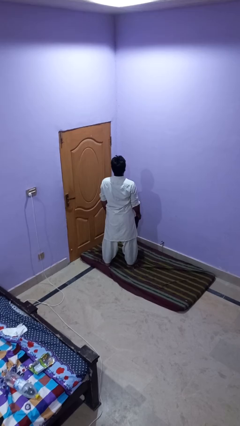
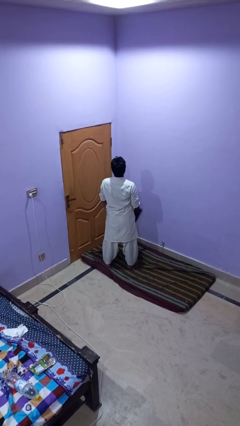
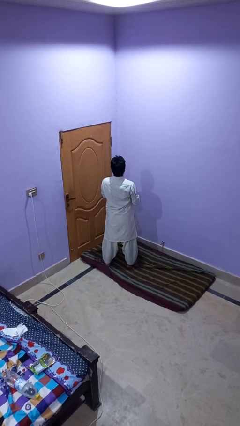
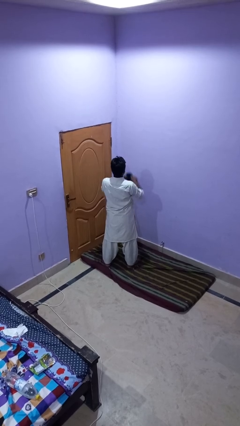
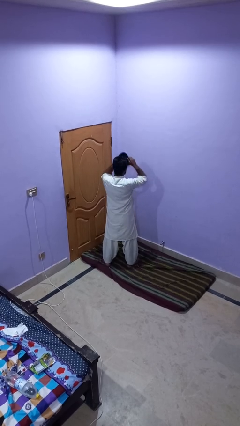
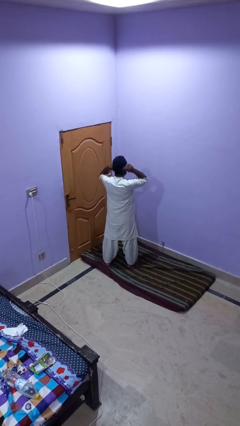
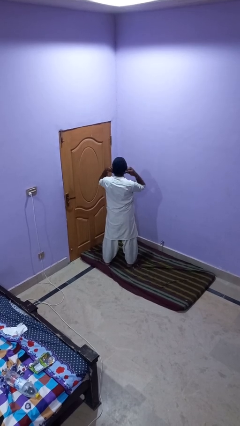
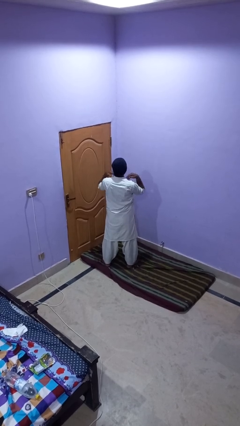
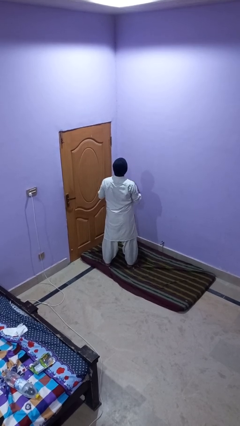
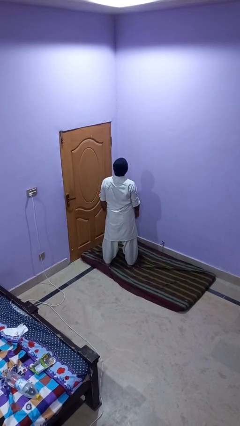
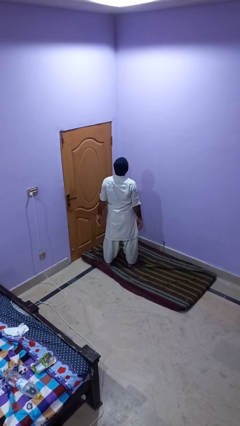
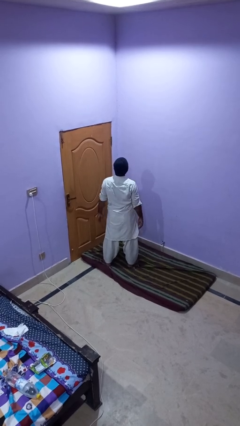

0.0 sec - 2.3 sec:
person puts on hat

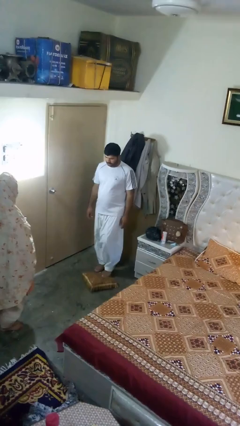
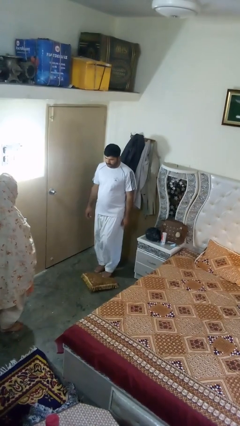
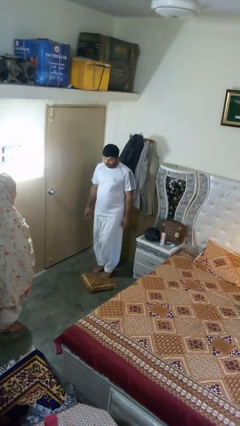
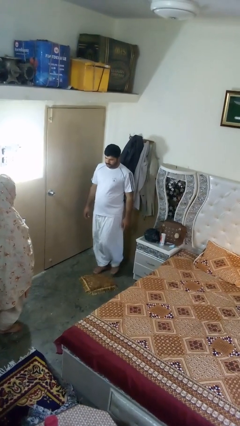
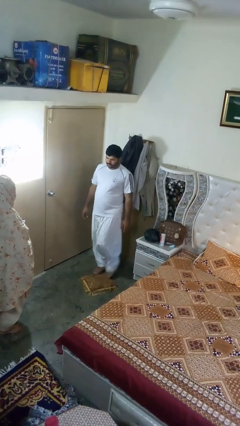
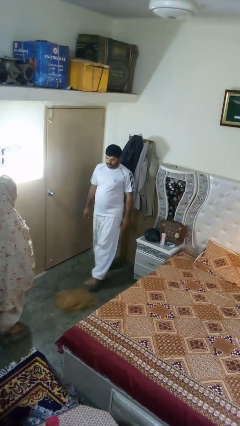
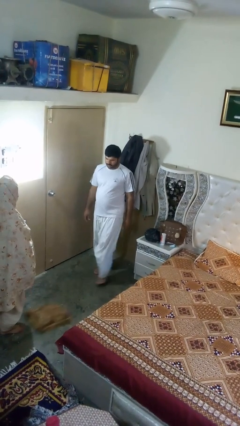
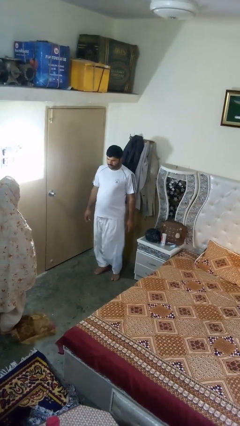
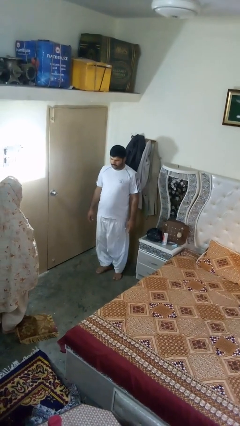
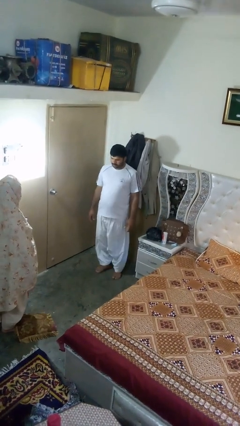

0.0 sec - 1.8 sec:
person kicks object to person

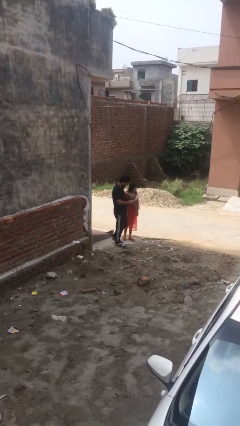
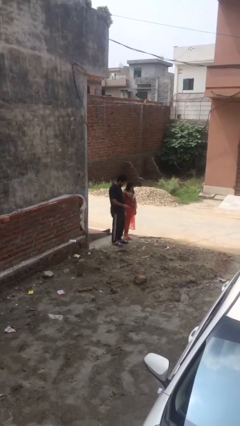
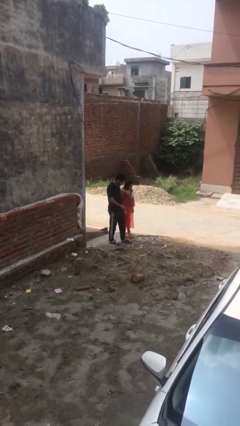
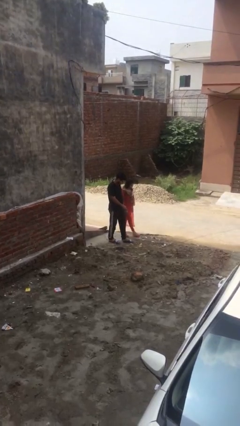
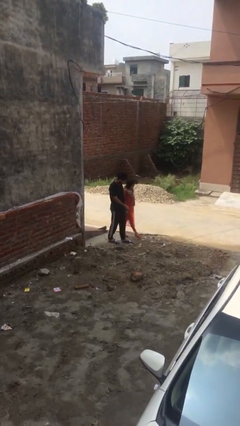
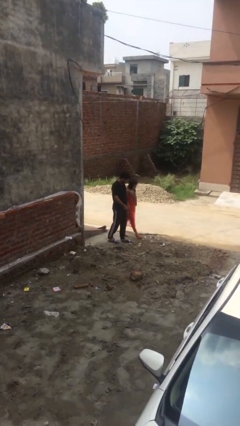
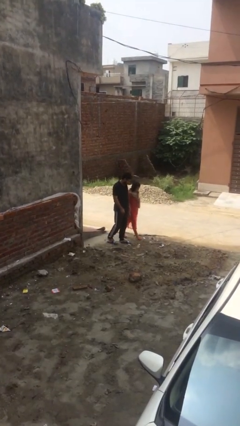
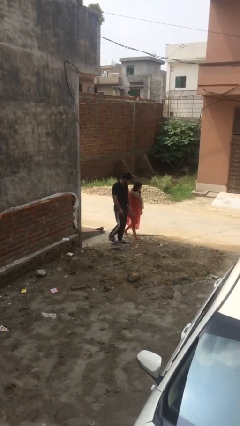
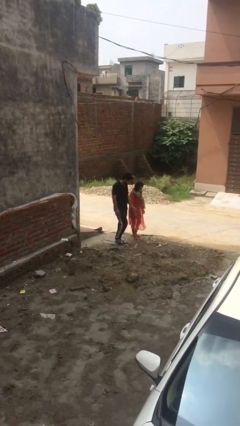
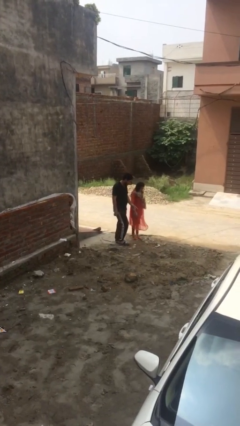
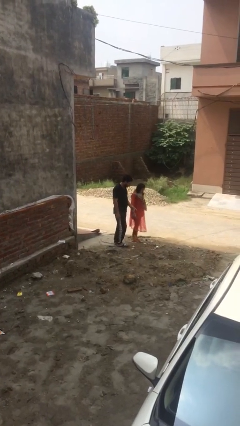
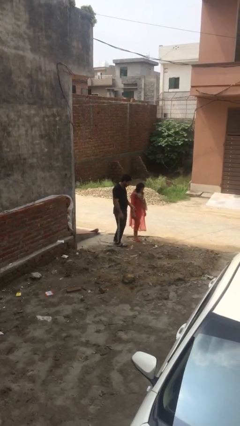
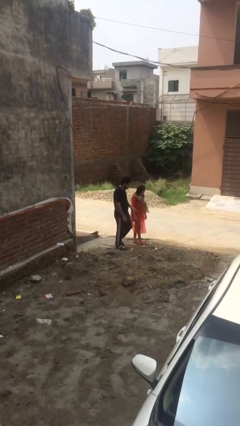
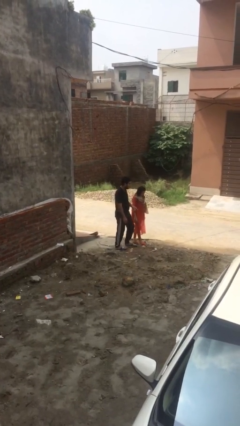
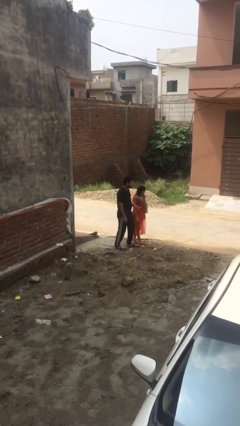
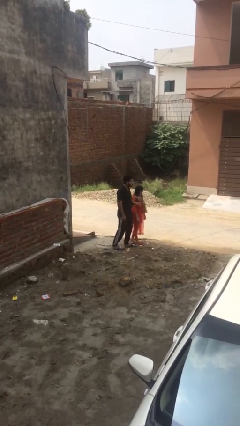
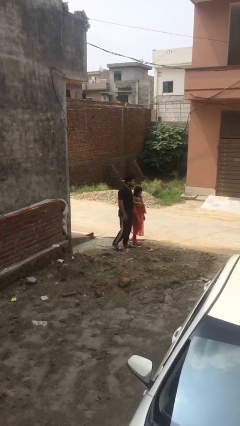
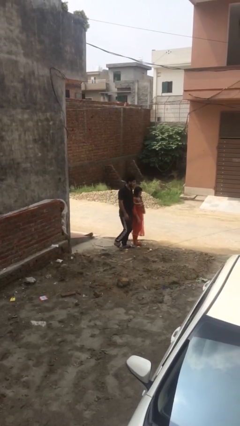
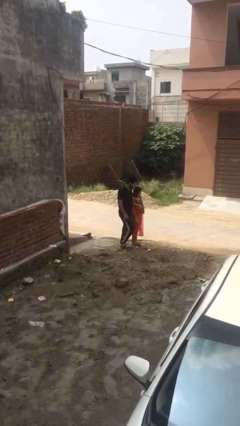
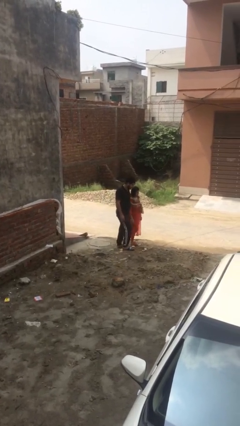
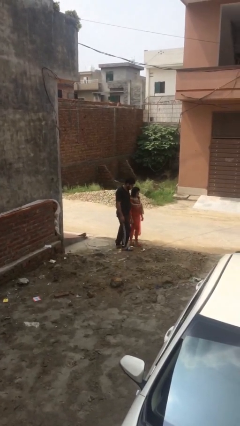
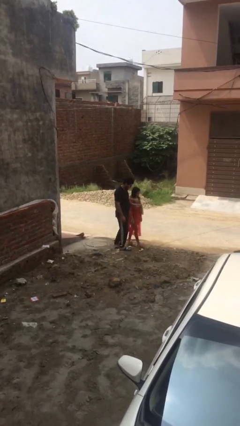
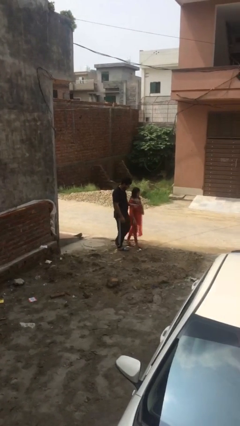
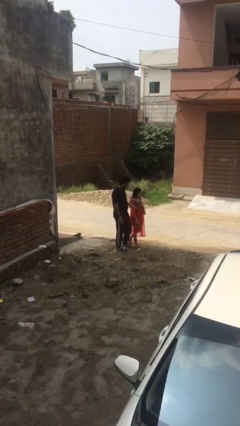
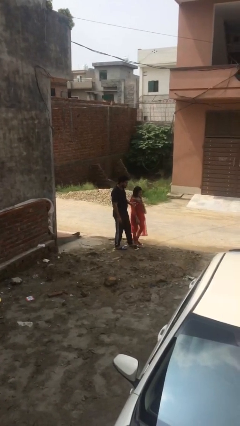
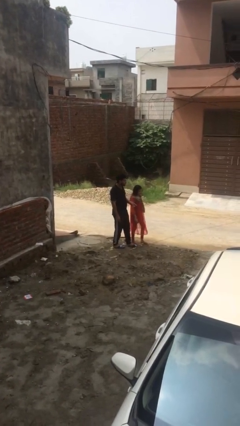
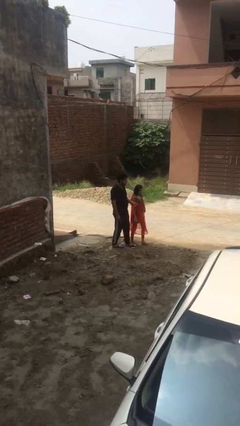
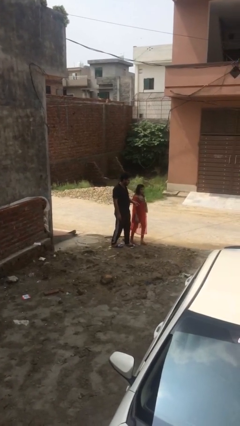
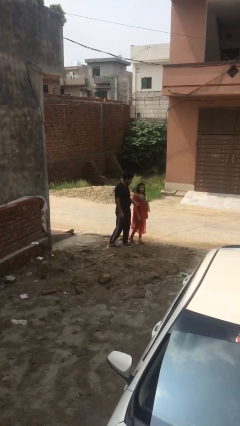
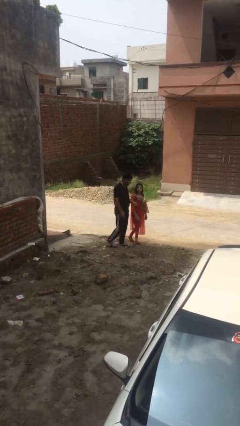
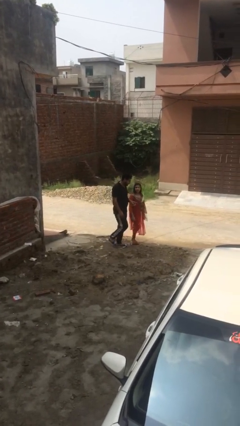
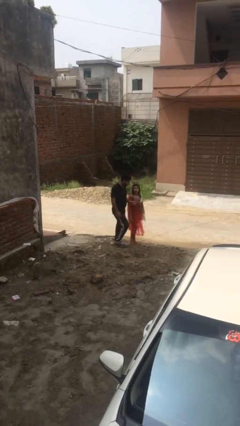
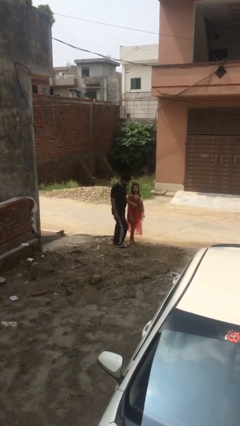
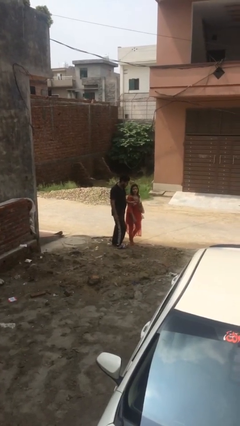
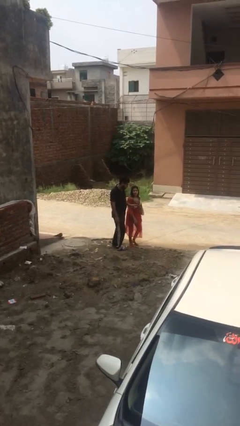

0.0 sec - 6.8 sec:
person talks to person

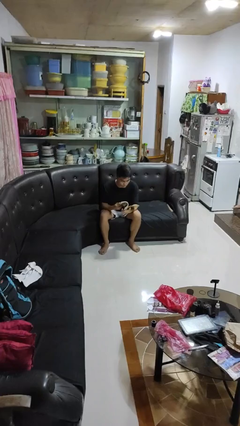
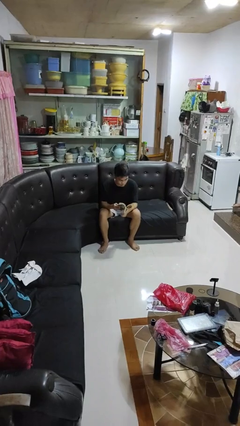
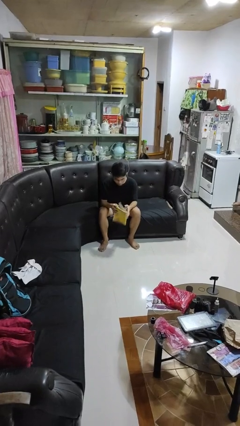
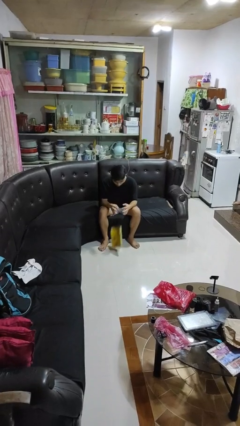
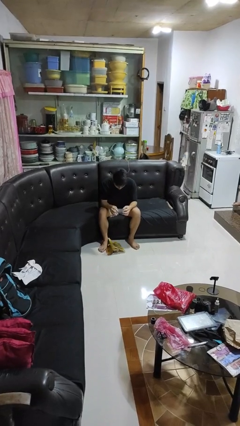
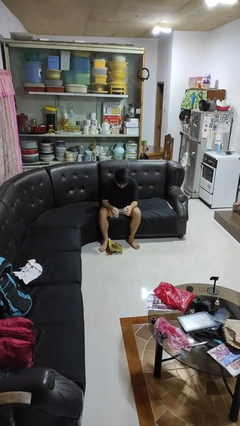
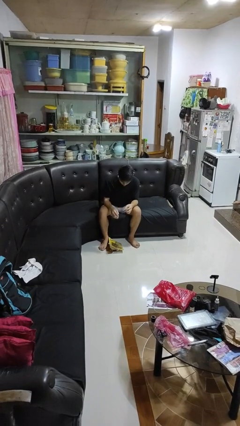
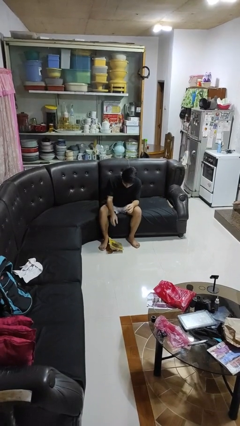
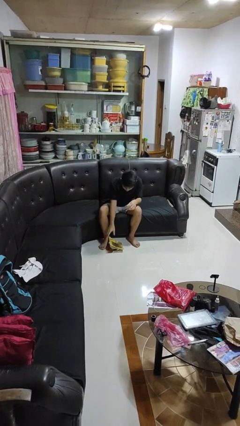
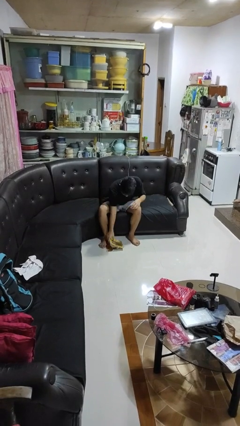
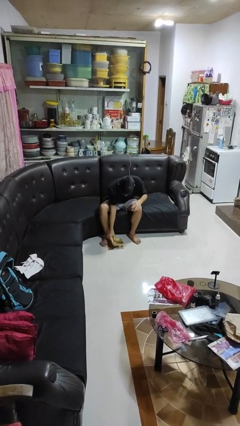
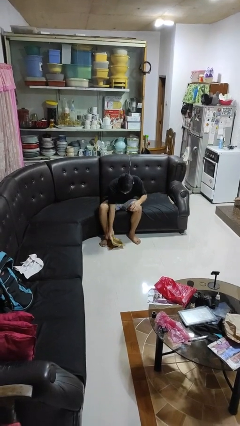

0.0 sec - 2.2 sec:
person drops object

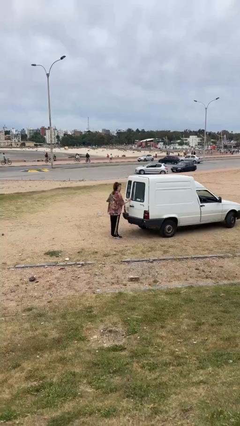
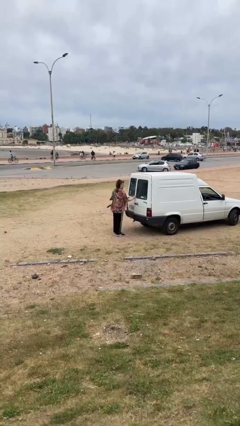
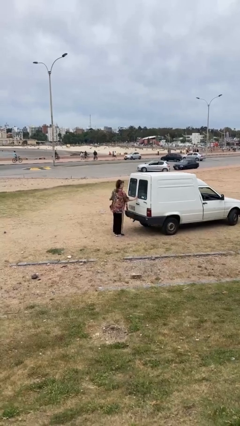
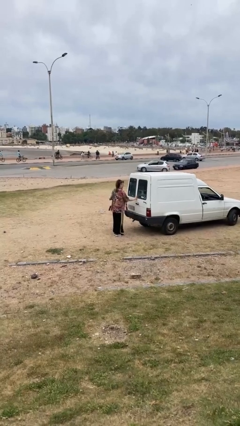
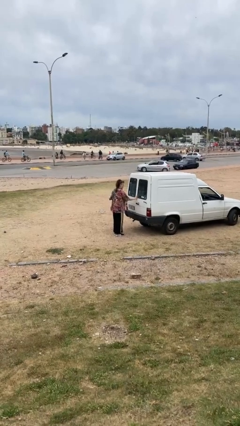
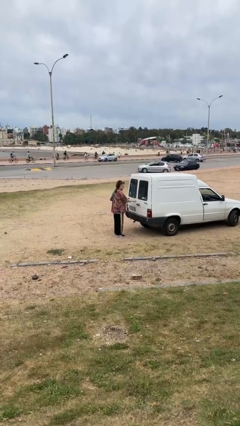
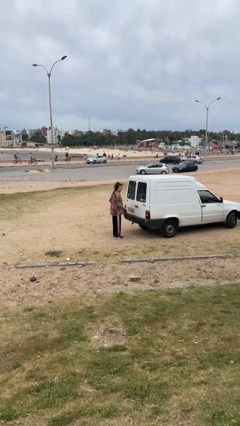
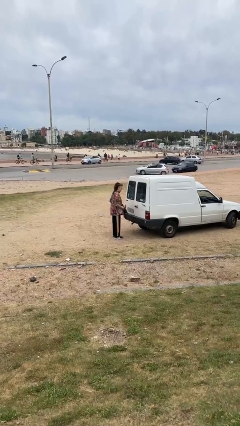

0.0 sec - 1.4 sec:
person closes car door

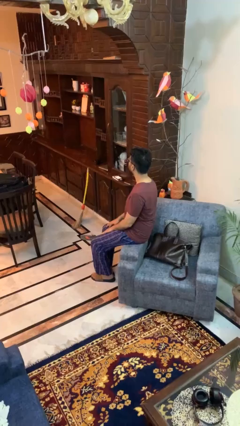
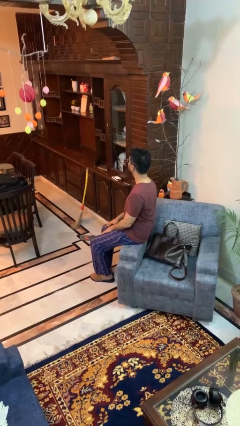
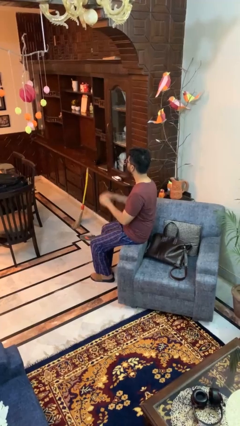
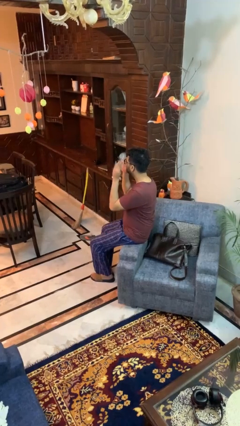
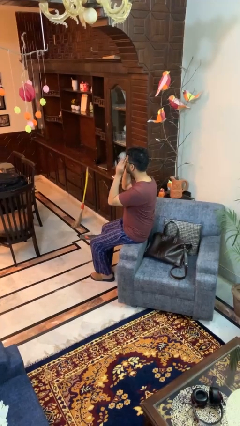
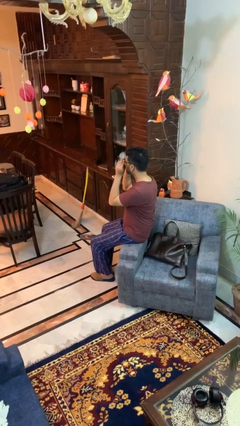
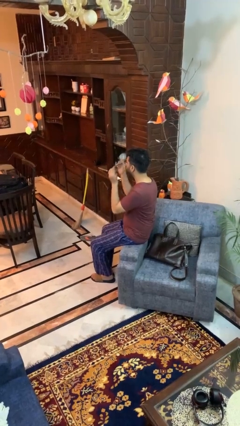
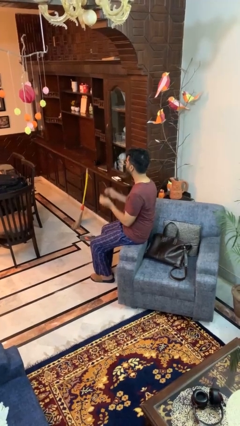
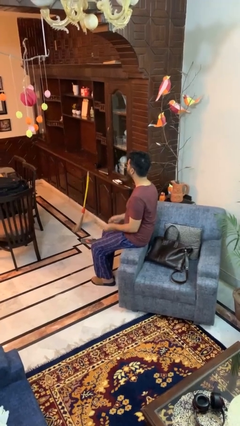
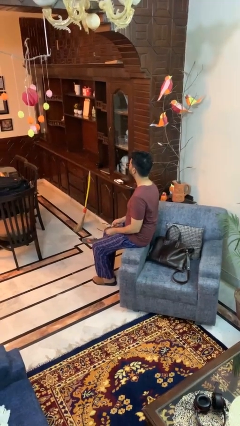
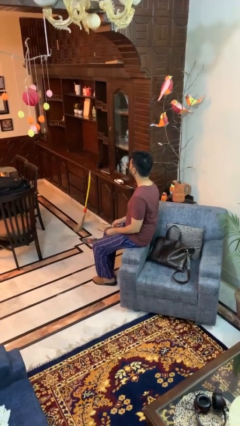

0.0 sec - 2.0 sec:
person takes off glasses

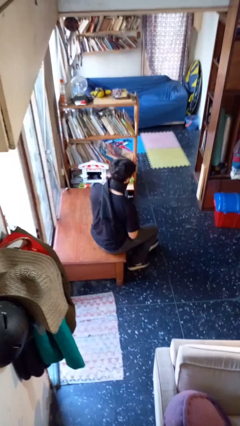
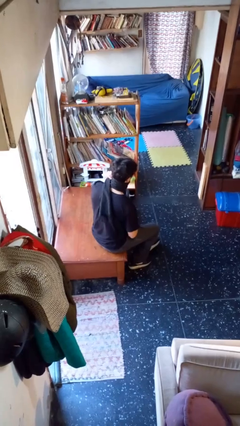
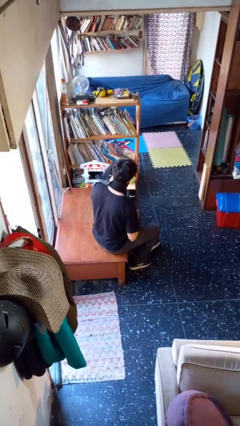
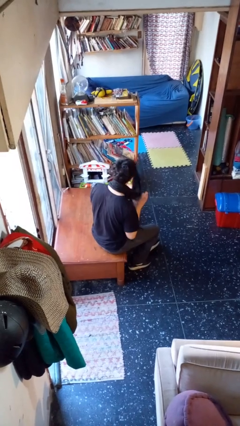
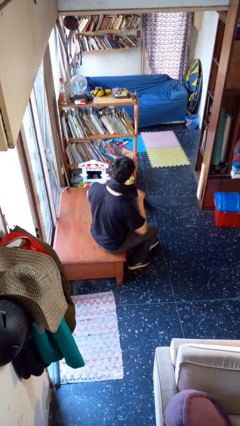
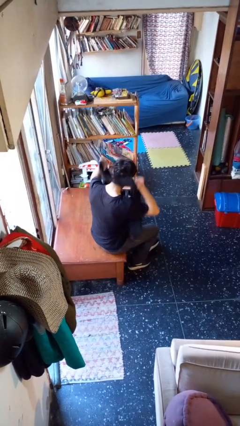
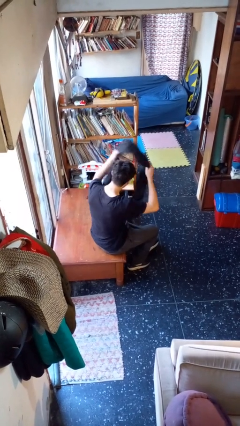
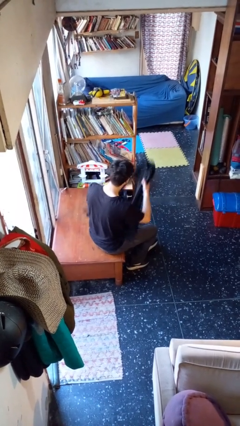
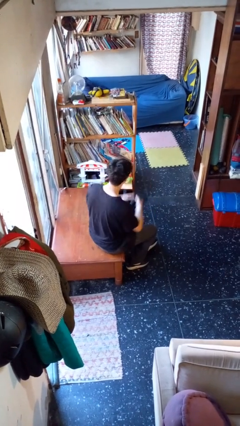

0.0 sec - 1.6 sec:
person takes off scarf
